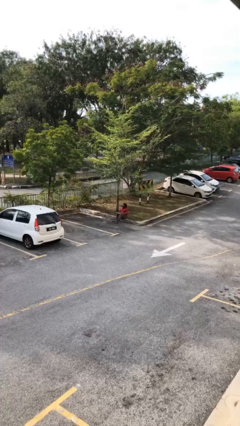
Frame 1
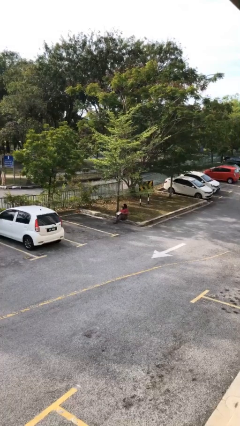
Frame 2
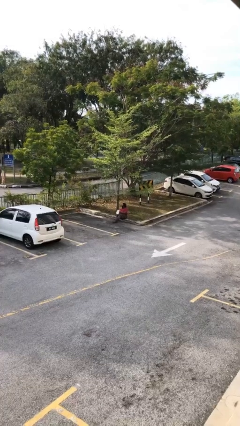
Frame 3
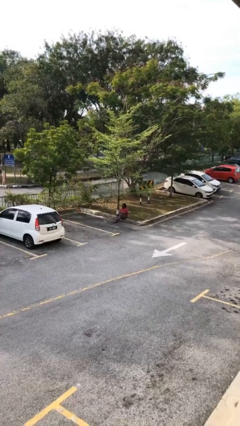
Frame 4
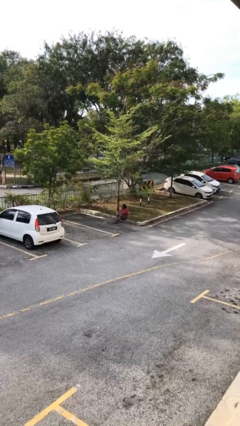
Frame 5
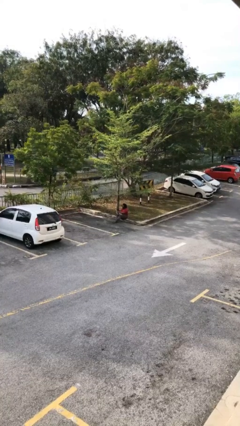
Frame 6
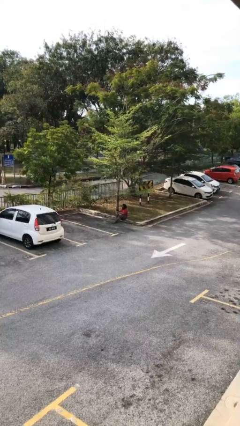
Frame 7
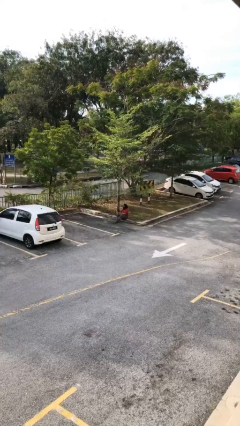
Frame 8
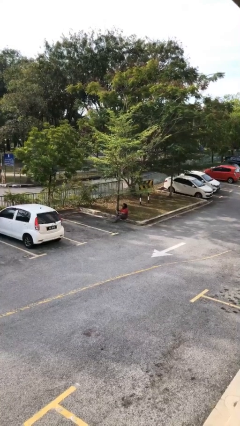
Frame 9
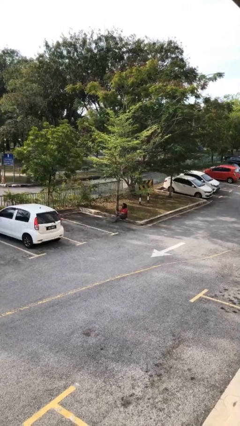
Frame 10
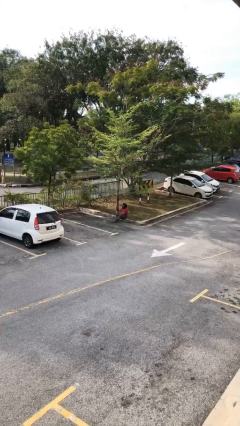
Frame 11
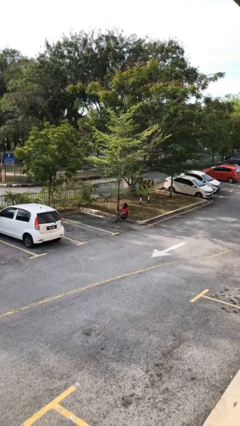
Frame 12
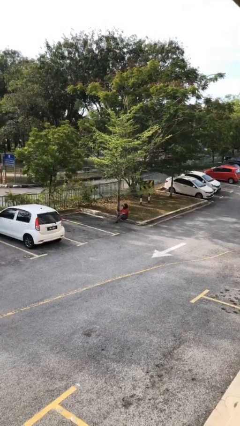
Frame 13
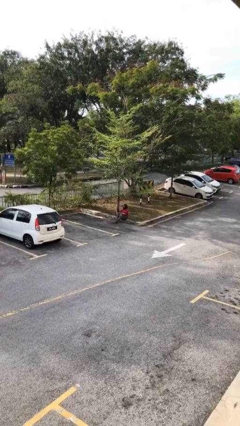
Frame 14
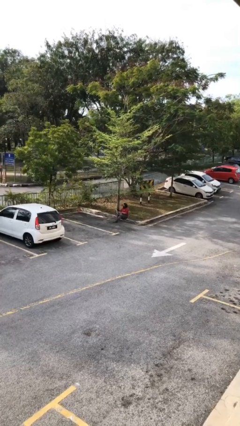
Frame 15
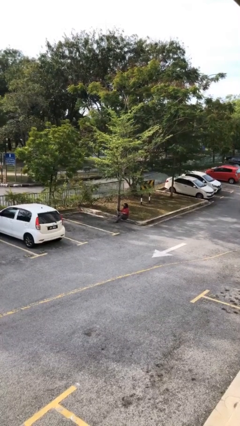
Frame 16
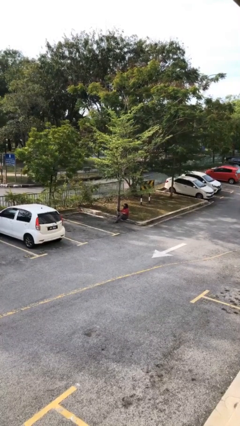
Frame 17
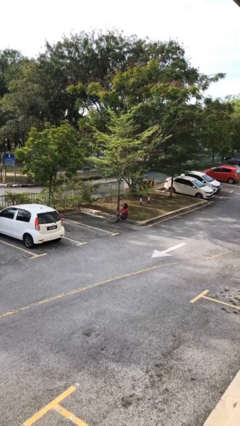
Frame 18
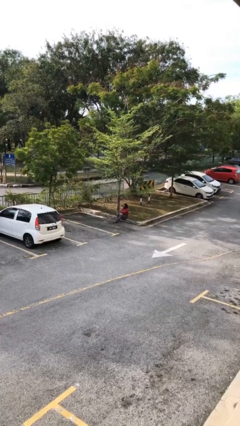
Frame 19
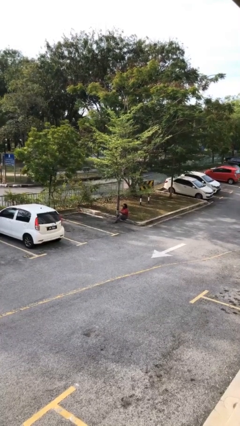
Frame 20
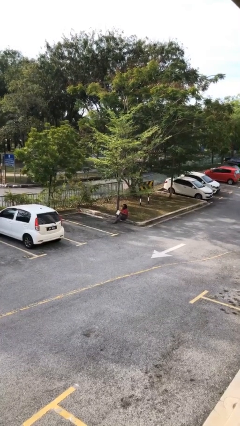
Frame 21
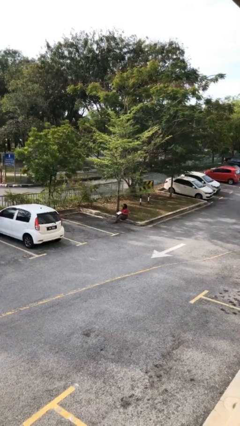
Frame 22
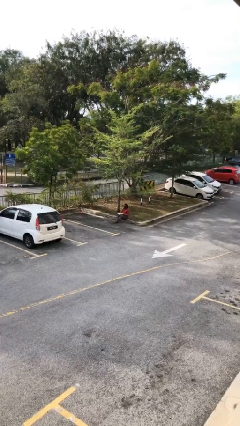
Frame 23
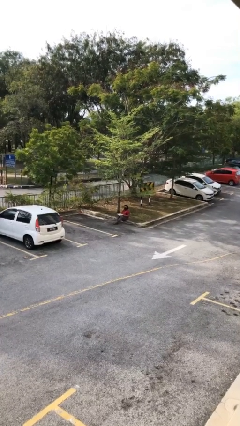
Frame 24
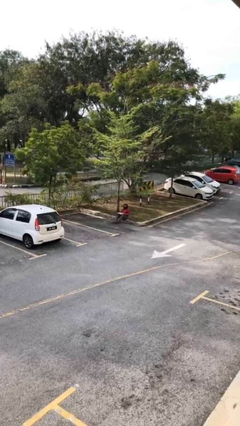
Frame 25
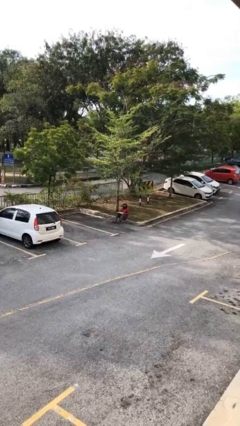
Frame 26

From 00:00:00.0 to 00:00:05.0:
person interacts with laptop

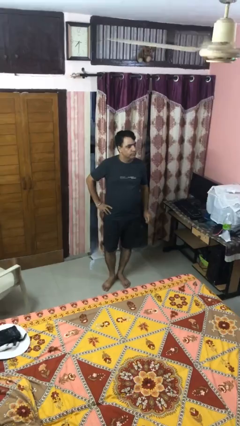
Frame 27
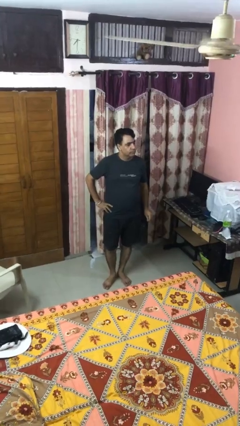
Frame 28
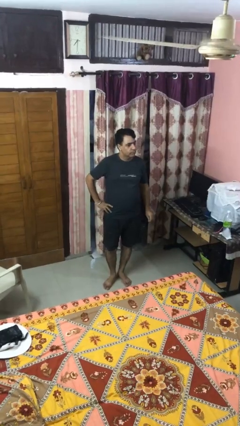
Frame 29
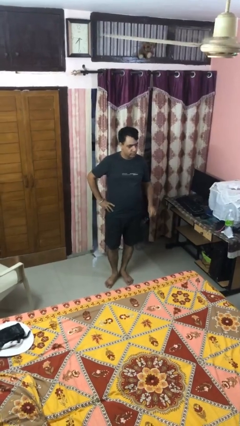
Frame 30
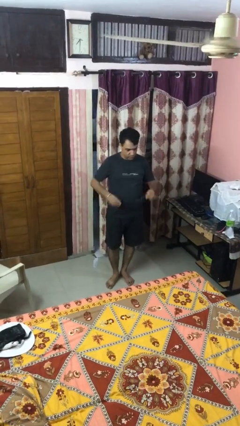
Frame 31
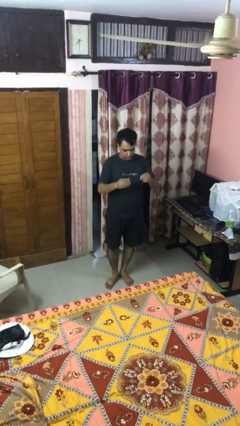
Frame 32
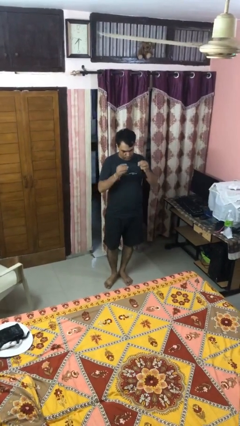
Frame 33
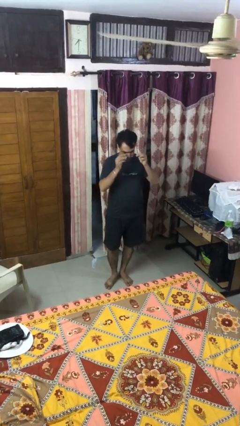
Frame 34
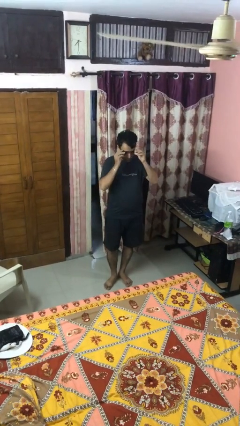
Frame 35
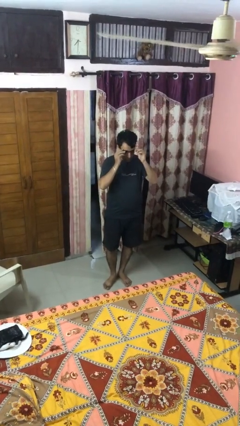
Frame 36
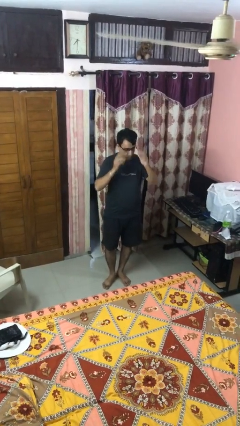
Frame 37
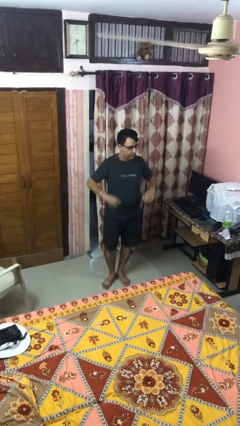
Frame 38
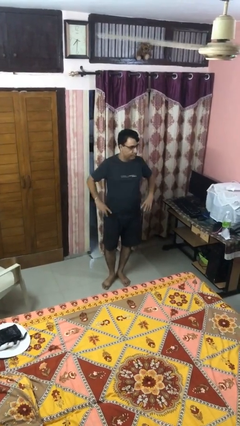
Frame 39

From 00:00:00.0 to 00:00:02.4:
person puts on glasses

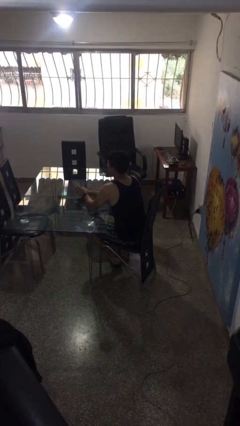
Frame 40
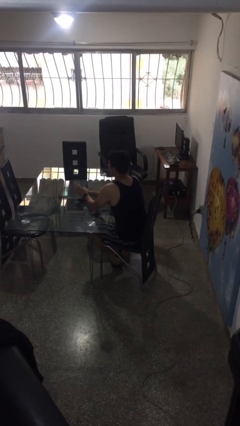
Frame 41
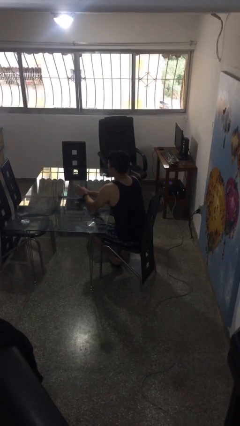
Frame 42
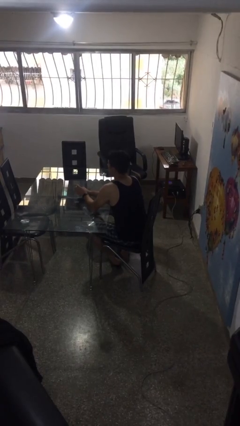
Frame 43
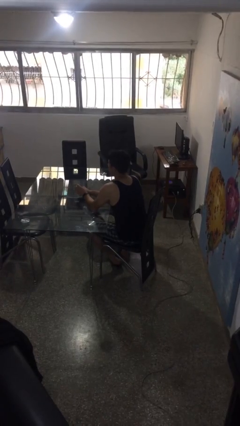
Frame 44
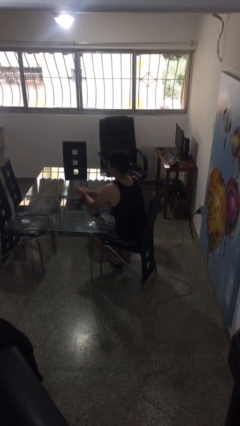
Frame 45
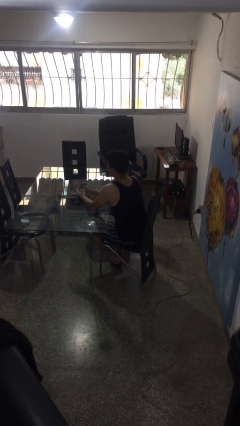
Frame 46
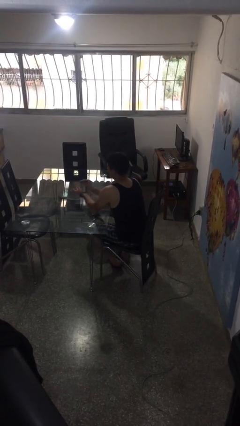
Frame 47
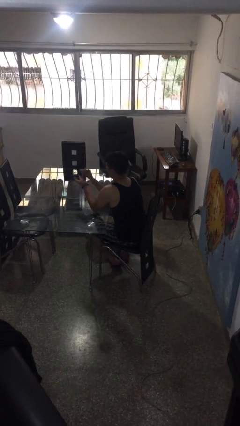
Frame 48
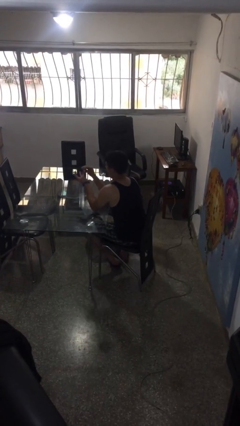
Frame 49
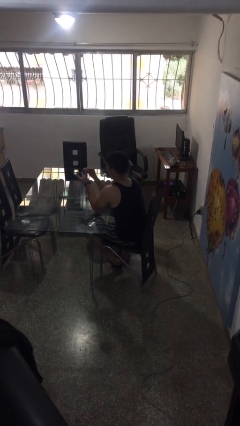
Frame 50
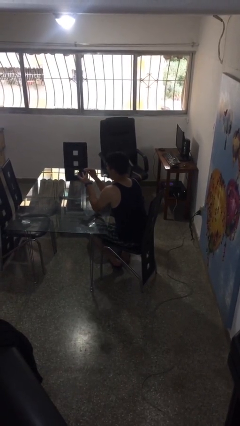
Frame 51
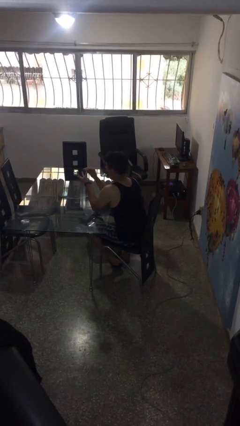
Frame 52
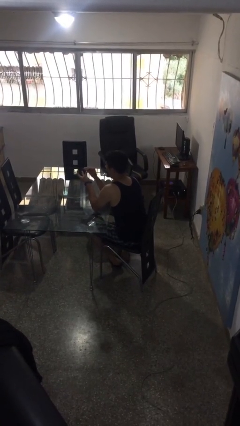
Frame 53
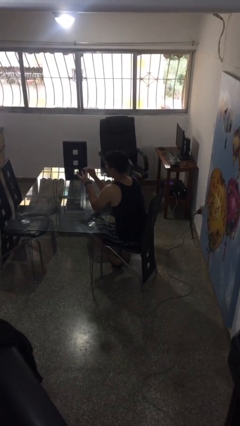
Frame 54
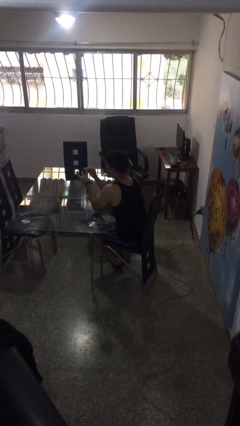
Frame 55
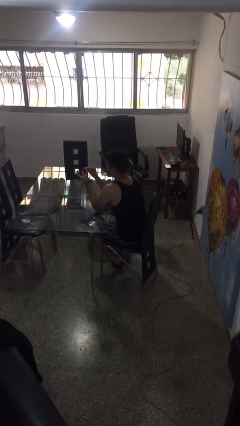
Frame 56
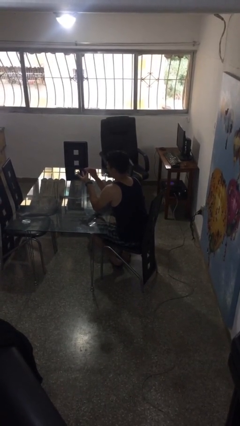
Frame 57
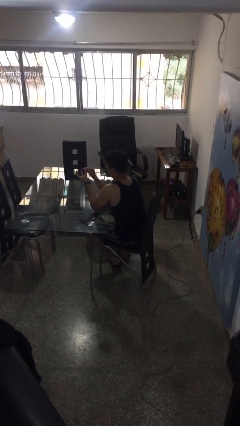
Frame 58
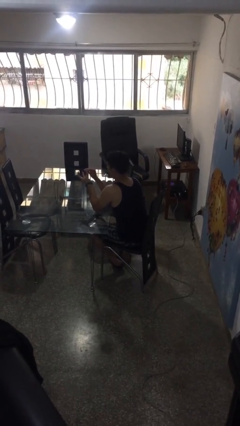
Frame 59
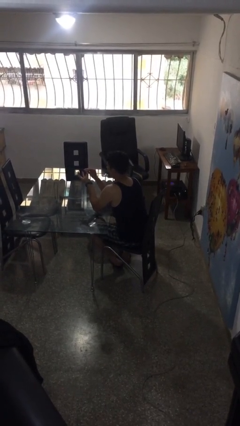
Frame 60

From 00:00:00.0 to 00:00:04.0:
person files fingernails

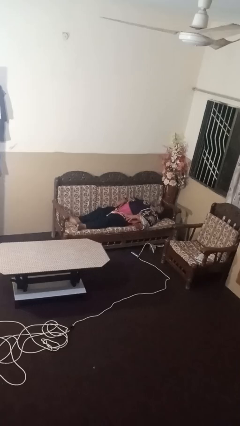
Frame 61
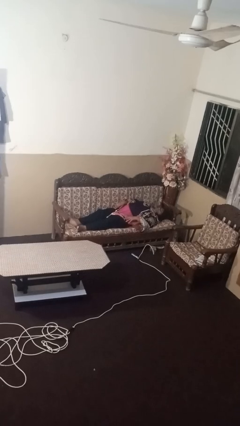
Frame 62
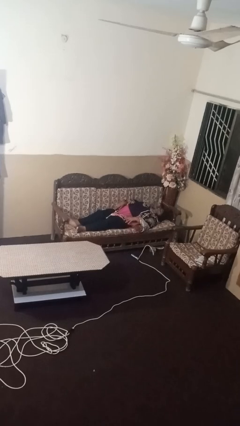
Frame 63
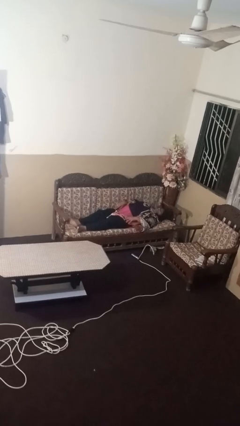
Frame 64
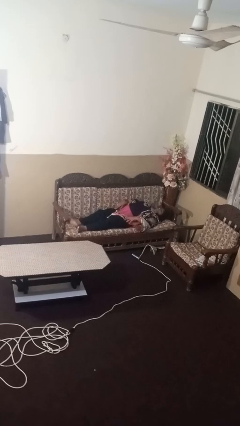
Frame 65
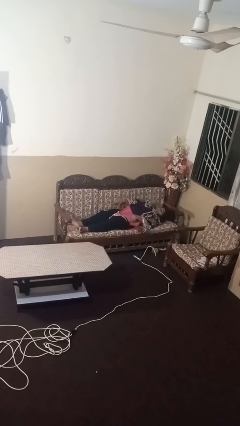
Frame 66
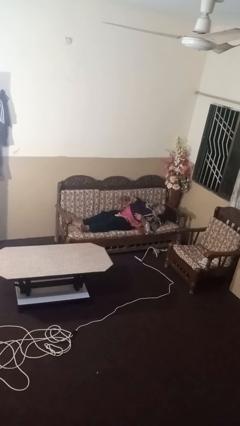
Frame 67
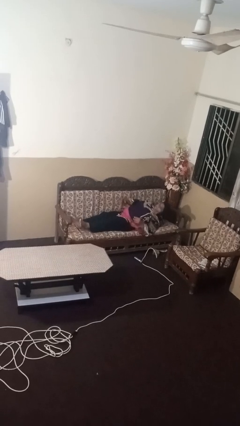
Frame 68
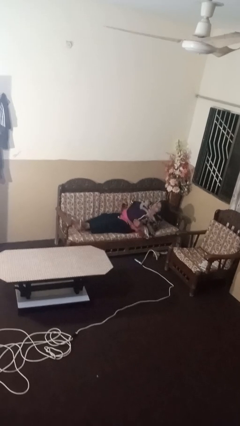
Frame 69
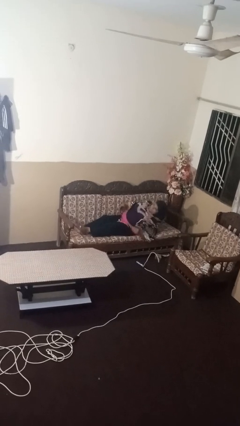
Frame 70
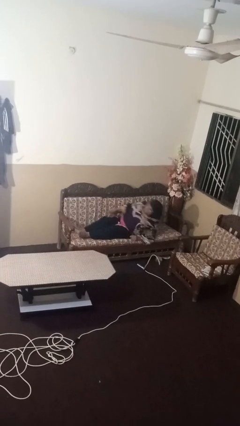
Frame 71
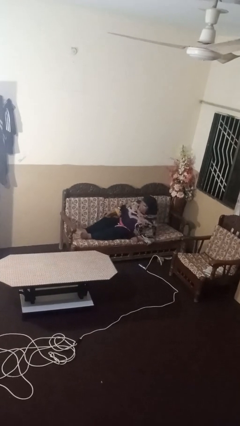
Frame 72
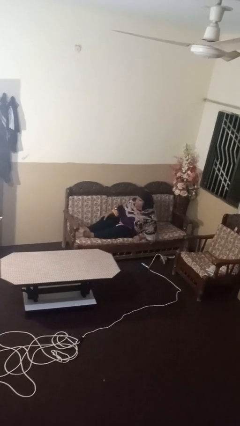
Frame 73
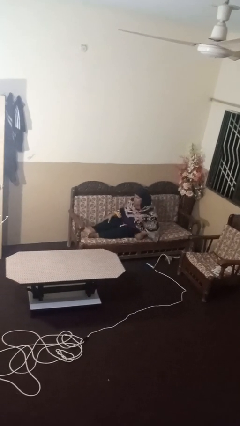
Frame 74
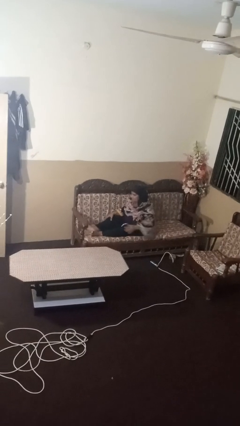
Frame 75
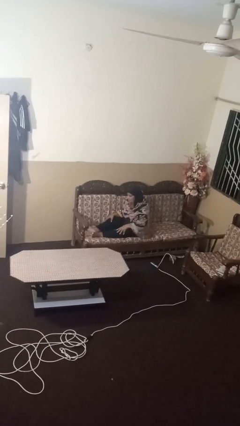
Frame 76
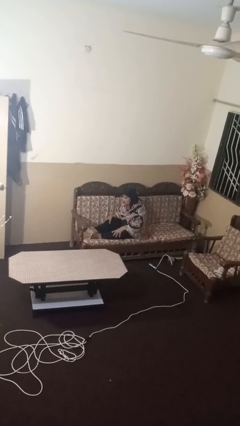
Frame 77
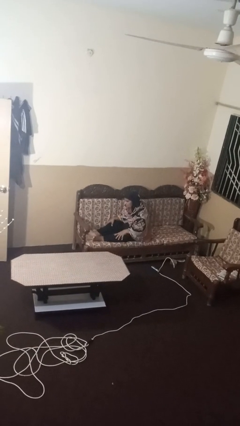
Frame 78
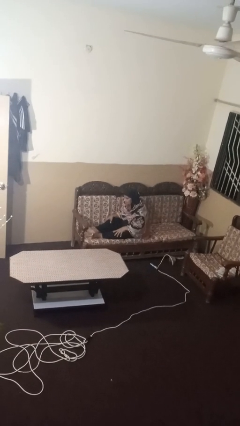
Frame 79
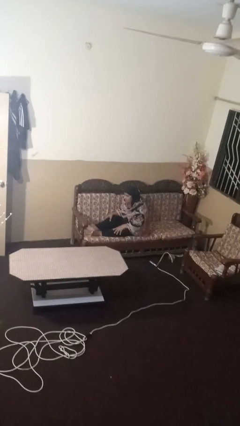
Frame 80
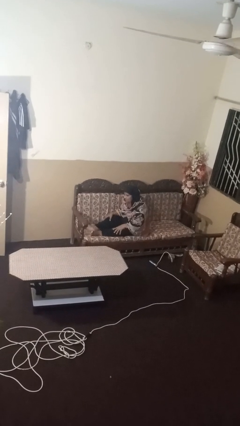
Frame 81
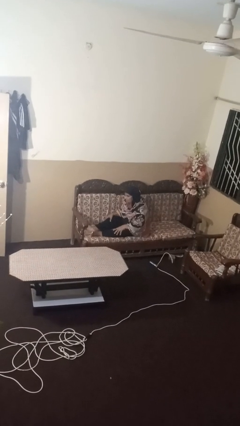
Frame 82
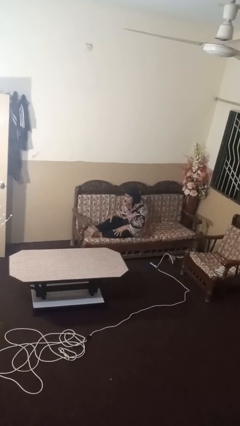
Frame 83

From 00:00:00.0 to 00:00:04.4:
person stands up

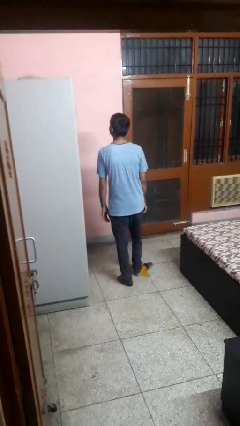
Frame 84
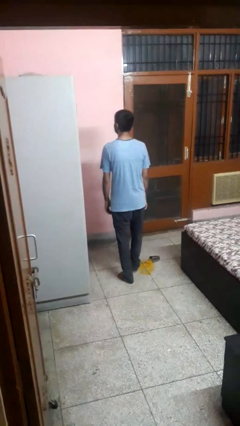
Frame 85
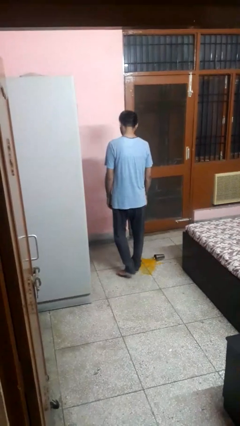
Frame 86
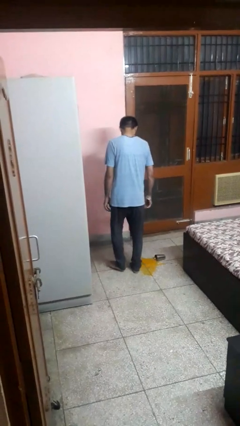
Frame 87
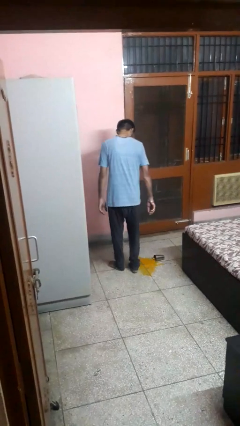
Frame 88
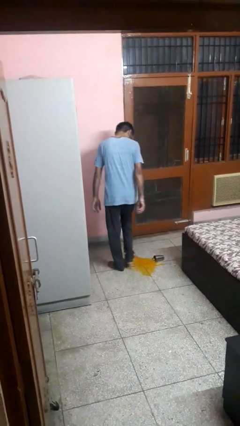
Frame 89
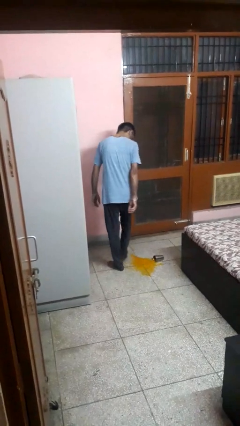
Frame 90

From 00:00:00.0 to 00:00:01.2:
person spills on floor

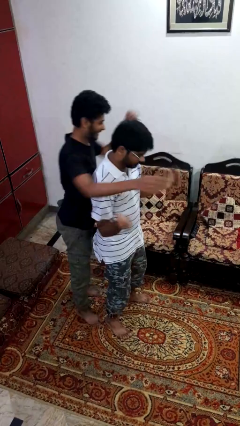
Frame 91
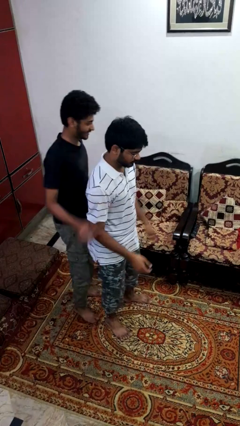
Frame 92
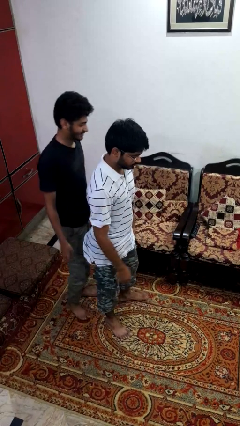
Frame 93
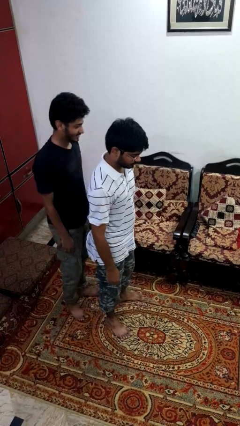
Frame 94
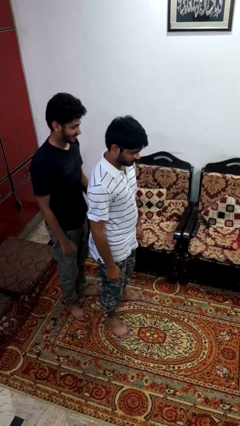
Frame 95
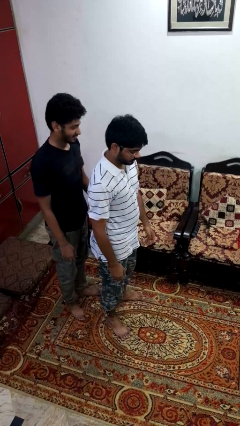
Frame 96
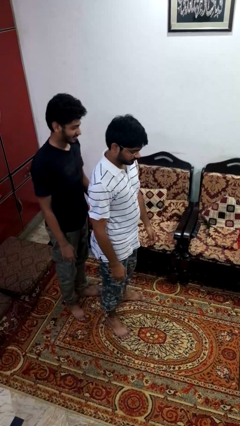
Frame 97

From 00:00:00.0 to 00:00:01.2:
person puts down person
